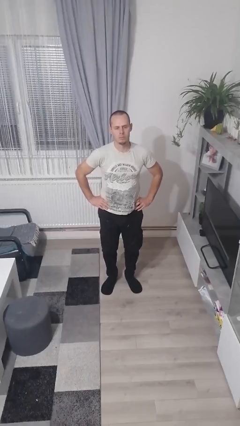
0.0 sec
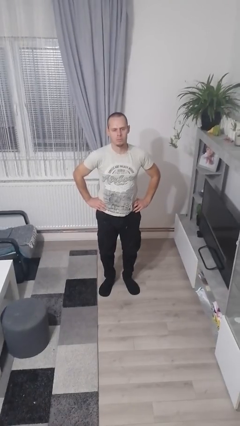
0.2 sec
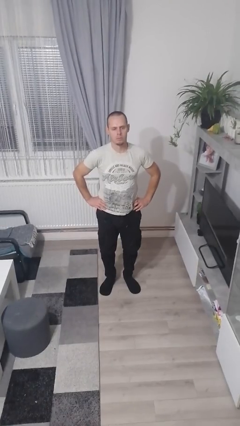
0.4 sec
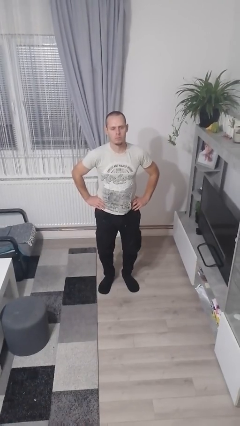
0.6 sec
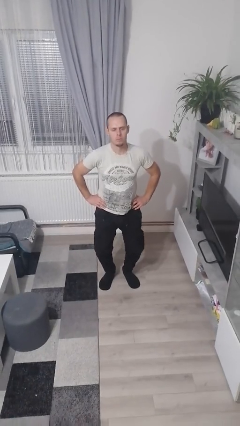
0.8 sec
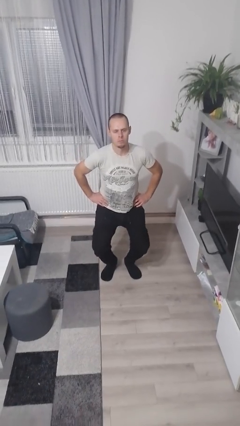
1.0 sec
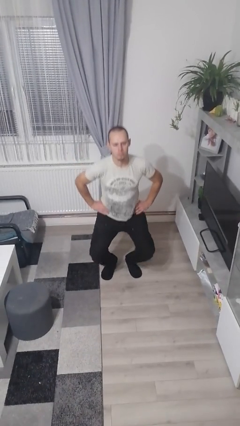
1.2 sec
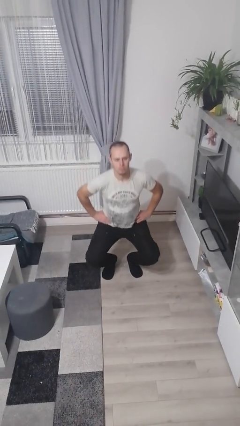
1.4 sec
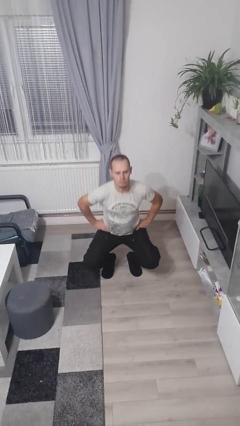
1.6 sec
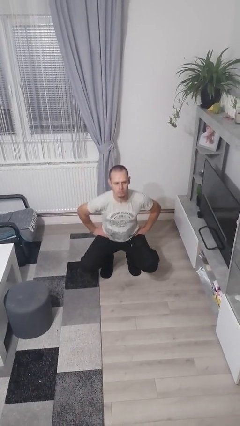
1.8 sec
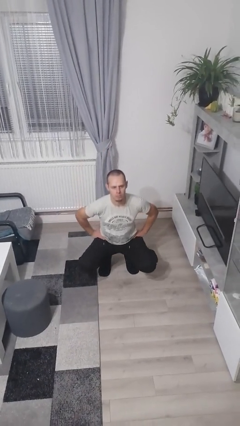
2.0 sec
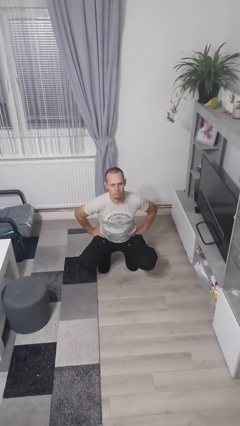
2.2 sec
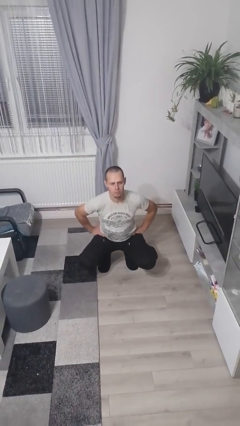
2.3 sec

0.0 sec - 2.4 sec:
person squats

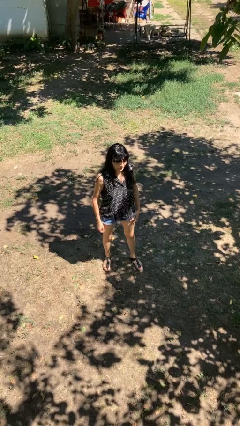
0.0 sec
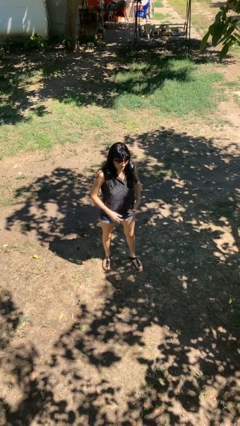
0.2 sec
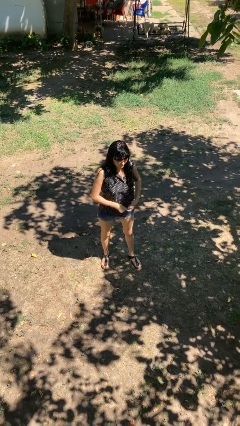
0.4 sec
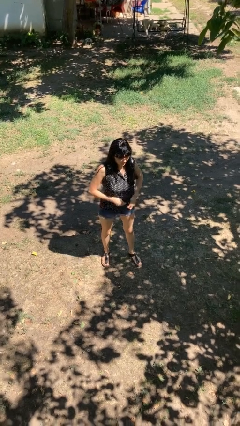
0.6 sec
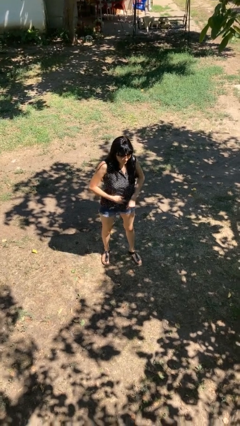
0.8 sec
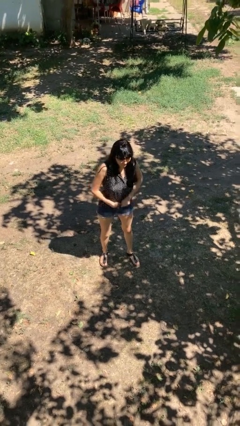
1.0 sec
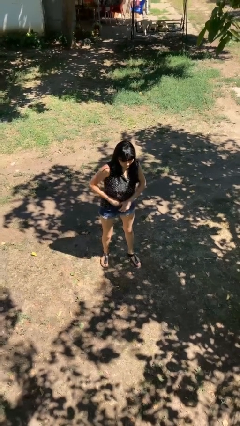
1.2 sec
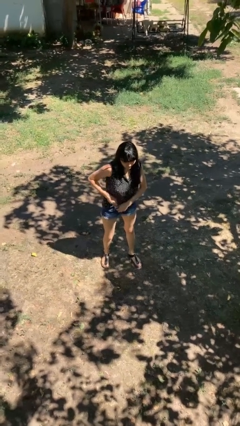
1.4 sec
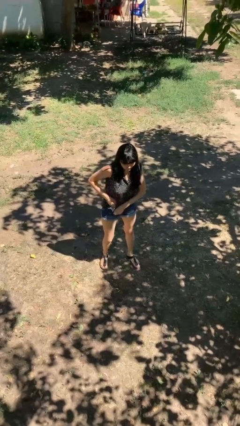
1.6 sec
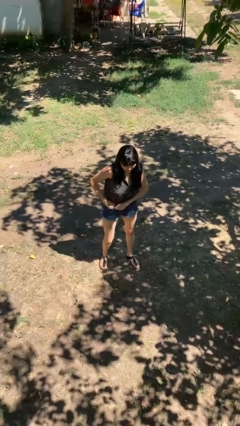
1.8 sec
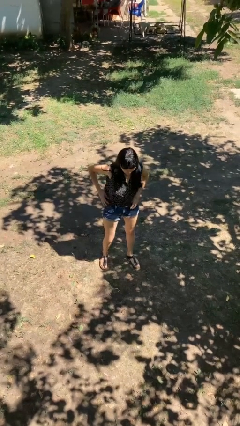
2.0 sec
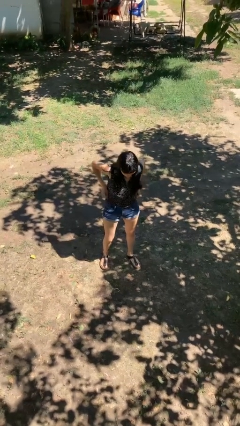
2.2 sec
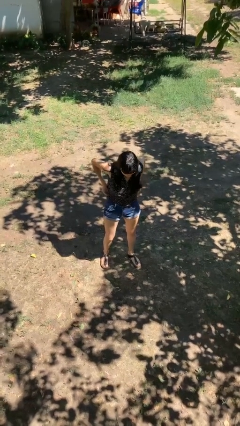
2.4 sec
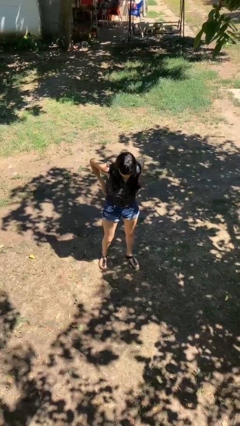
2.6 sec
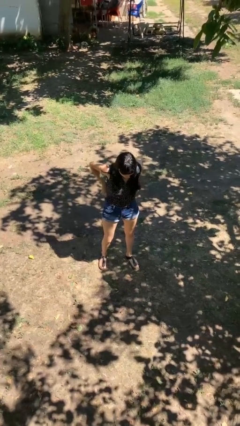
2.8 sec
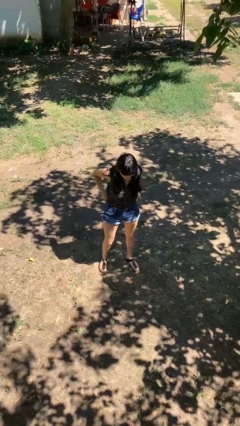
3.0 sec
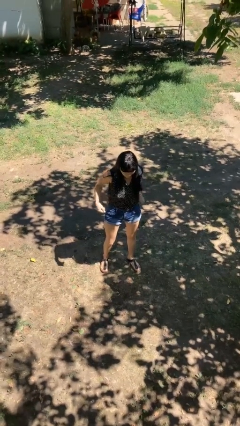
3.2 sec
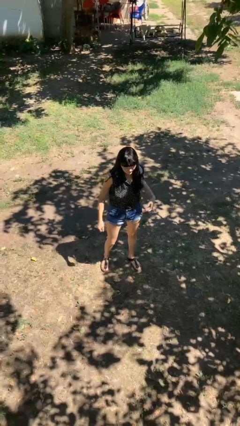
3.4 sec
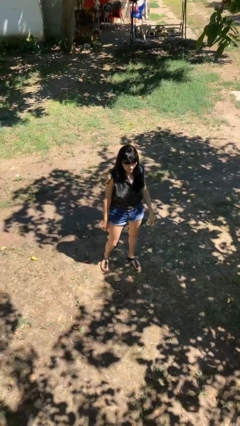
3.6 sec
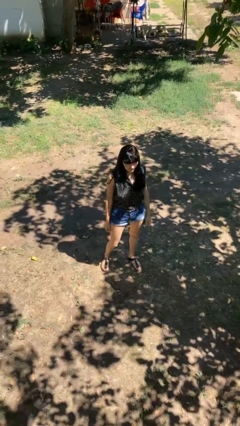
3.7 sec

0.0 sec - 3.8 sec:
person tucks in shirt

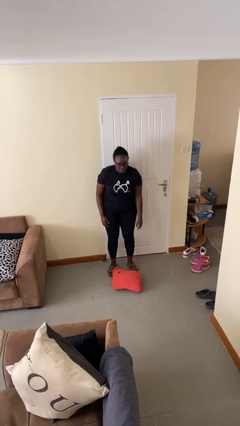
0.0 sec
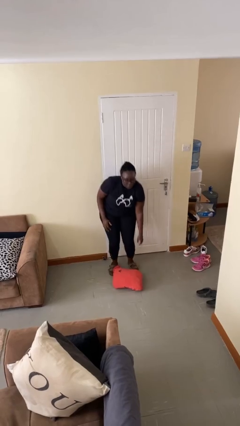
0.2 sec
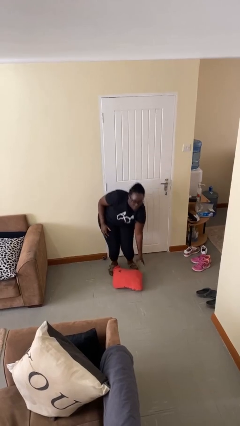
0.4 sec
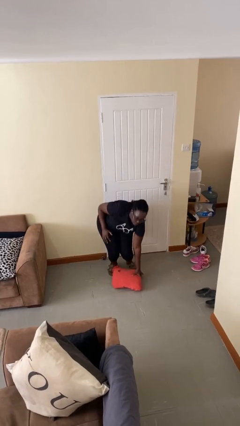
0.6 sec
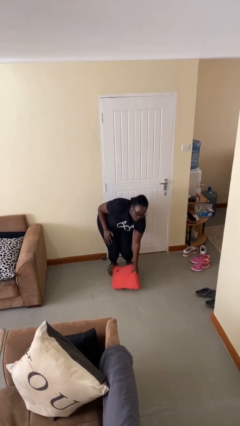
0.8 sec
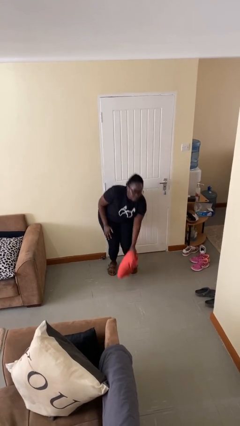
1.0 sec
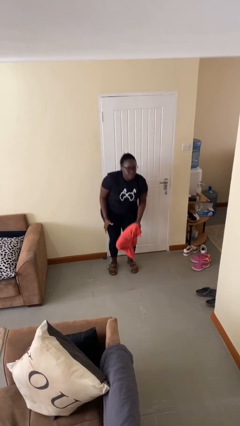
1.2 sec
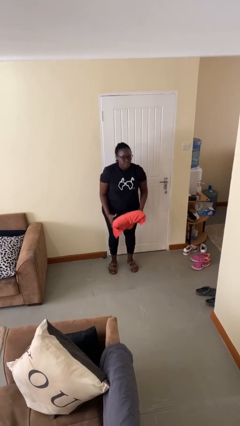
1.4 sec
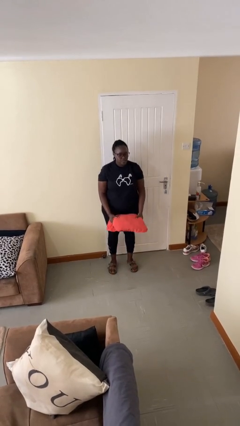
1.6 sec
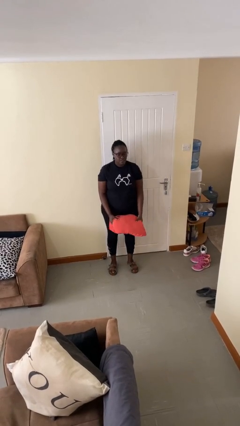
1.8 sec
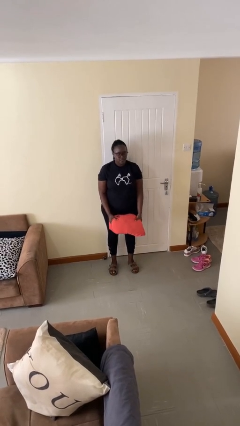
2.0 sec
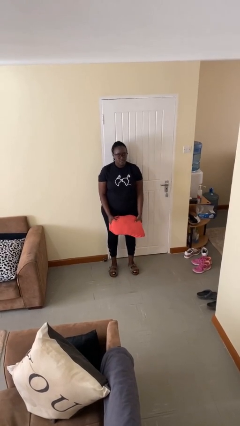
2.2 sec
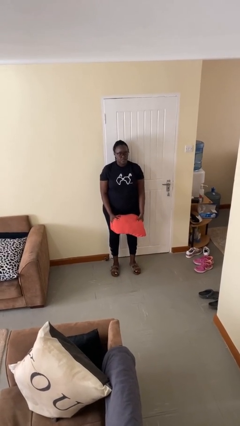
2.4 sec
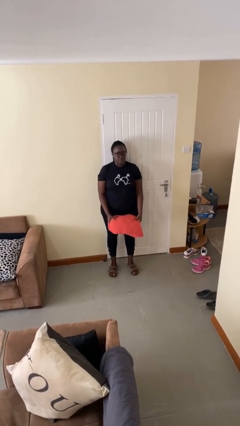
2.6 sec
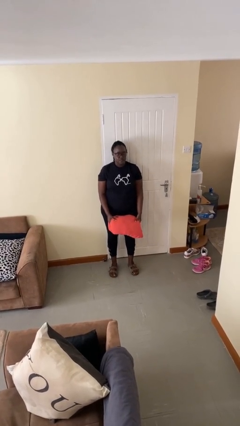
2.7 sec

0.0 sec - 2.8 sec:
person picks up object from floor

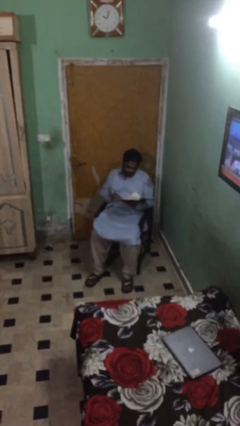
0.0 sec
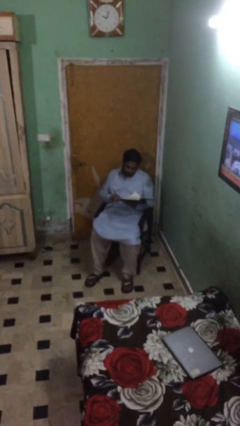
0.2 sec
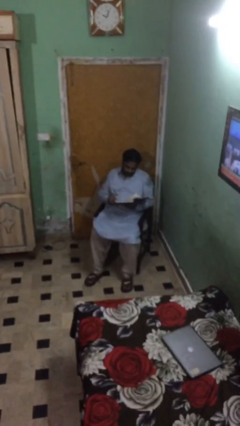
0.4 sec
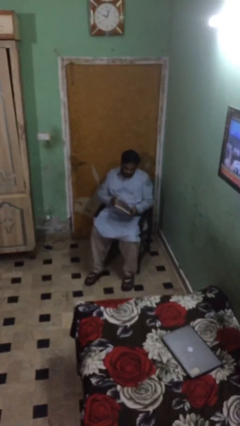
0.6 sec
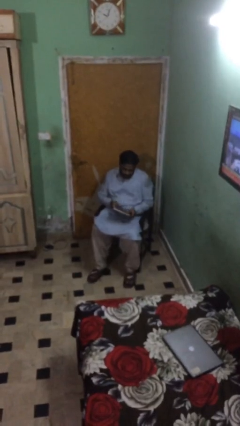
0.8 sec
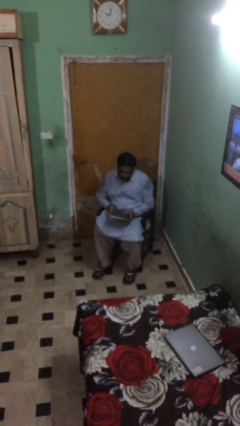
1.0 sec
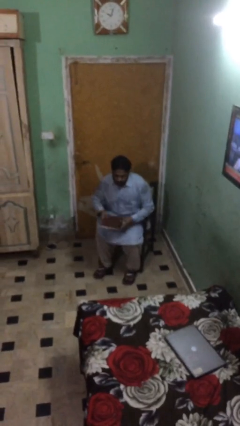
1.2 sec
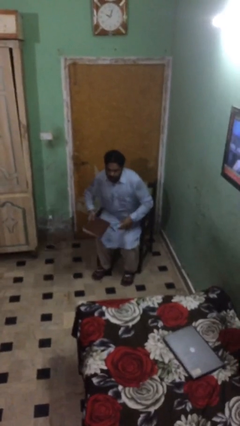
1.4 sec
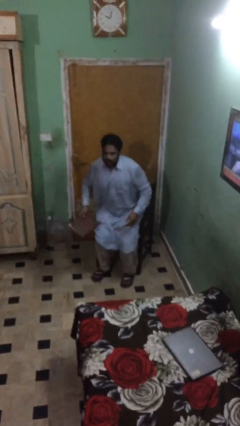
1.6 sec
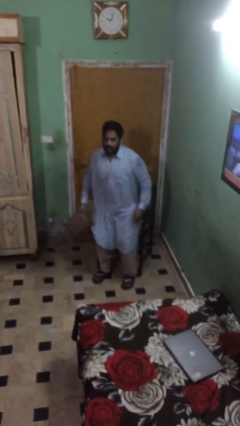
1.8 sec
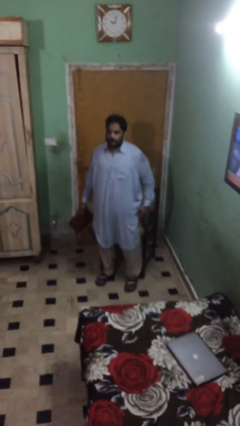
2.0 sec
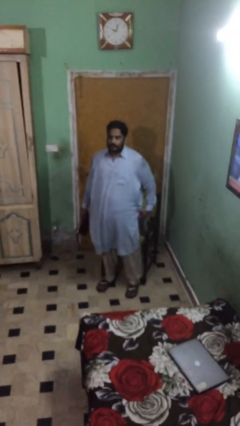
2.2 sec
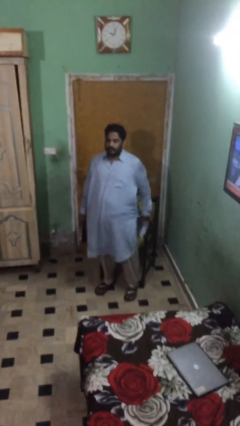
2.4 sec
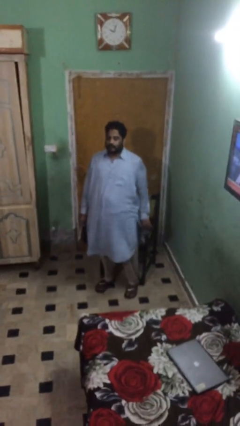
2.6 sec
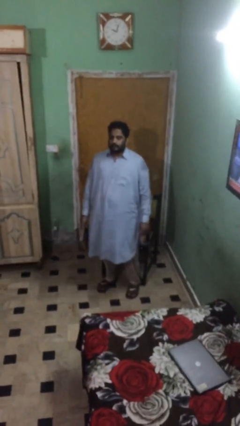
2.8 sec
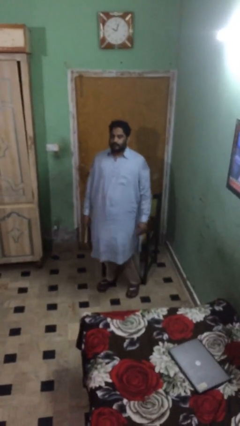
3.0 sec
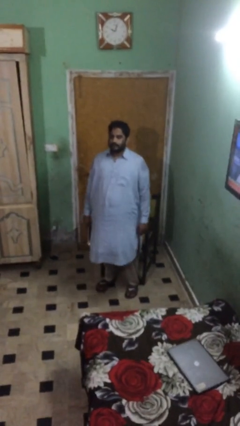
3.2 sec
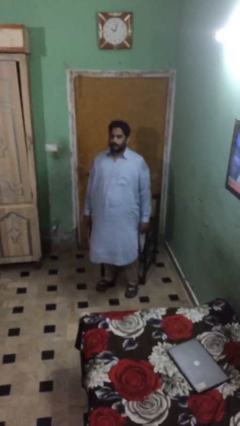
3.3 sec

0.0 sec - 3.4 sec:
person stands up

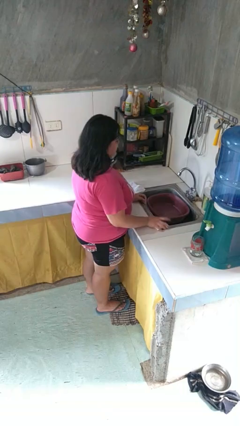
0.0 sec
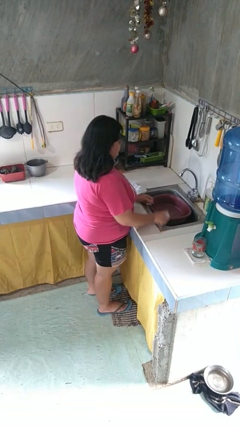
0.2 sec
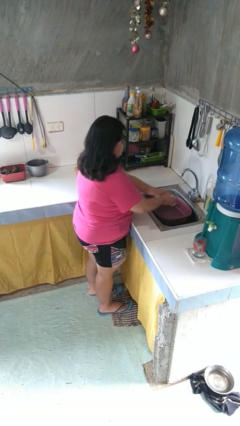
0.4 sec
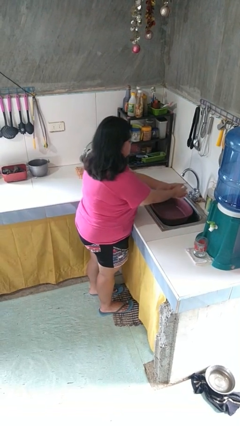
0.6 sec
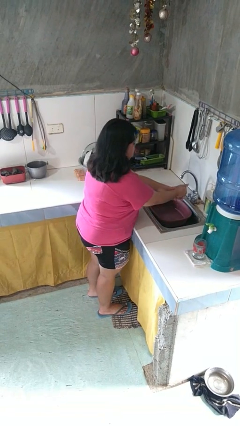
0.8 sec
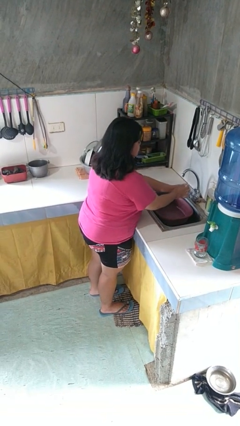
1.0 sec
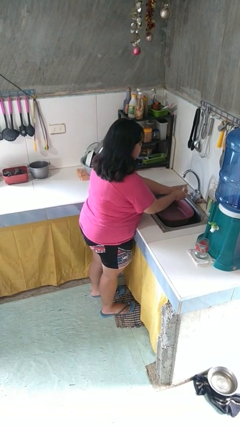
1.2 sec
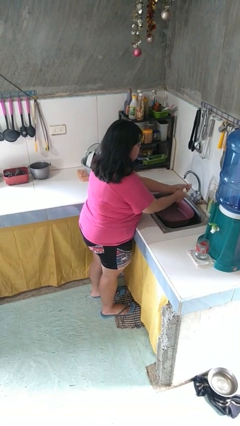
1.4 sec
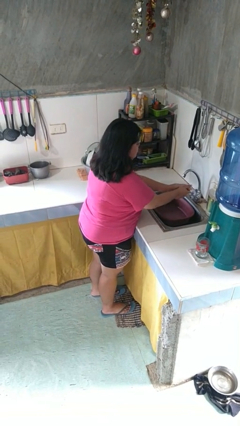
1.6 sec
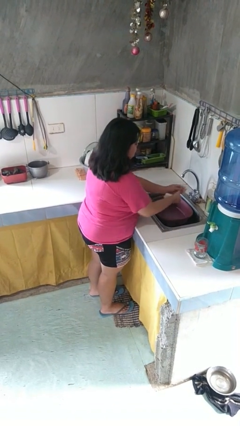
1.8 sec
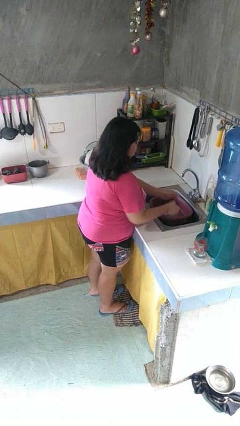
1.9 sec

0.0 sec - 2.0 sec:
person washes hands

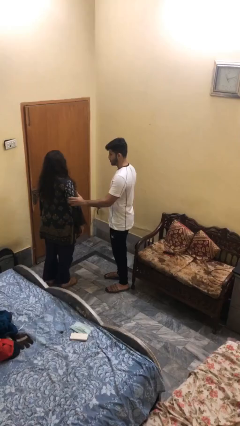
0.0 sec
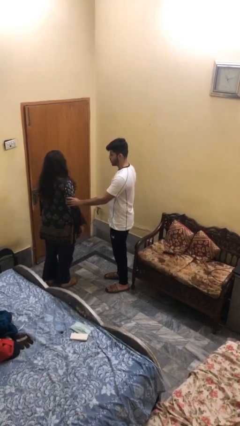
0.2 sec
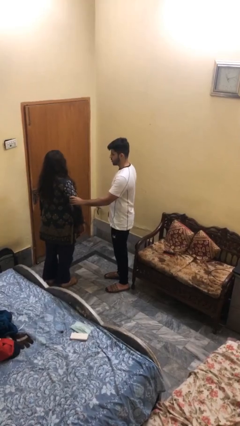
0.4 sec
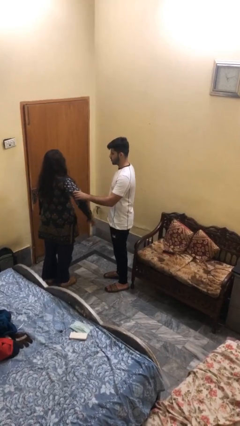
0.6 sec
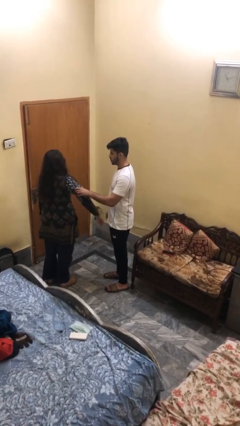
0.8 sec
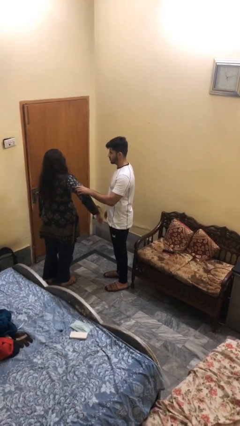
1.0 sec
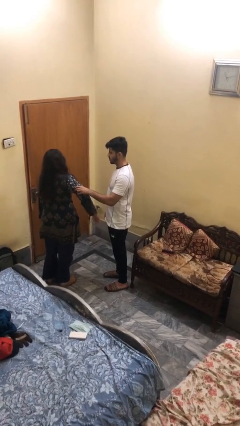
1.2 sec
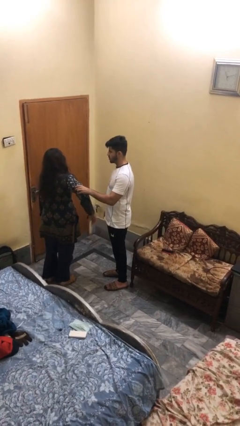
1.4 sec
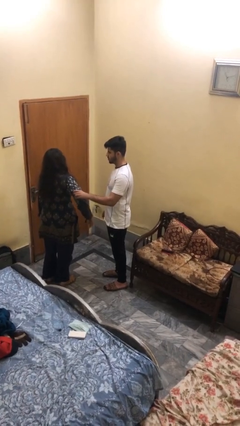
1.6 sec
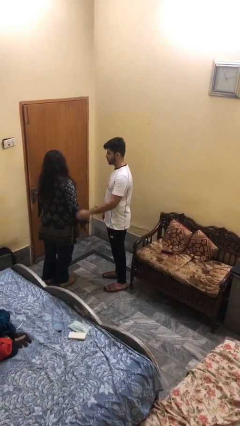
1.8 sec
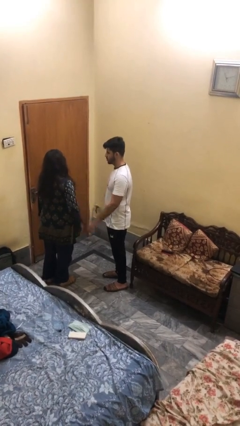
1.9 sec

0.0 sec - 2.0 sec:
person grabs person by bicep

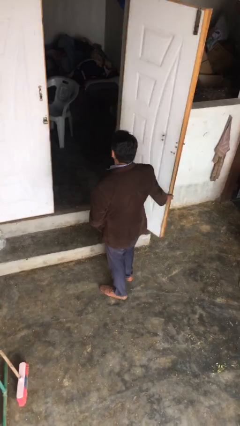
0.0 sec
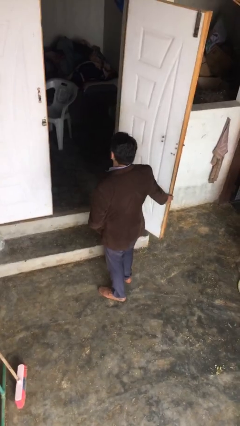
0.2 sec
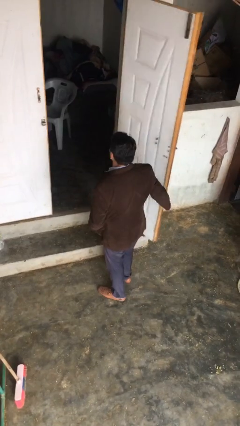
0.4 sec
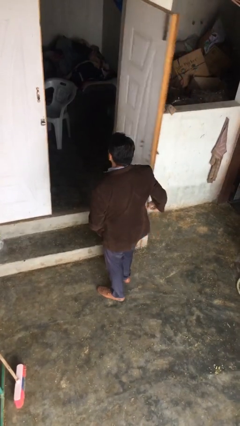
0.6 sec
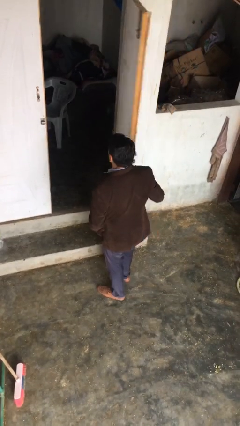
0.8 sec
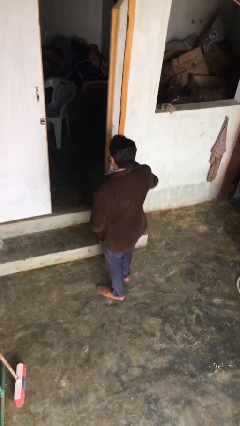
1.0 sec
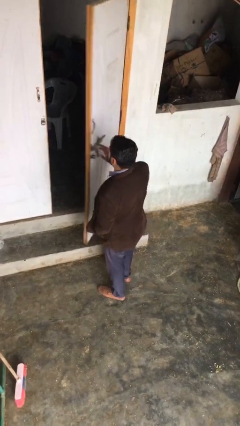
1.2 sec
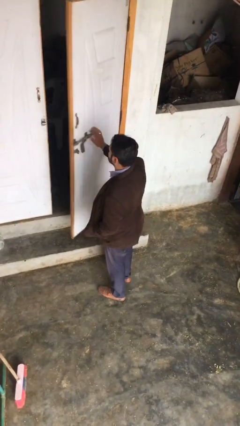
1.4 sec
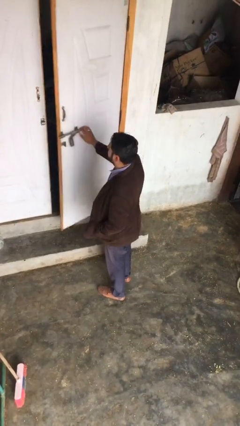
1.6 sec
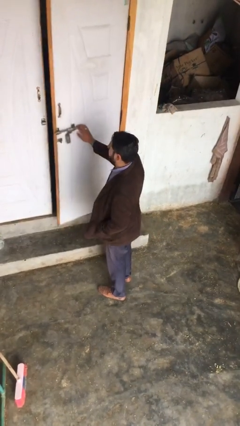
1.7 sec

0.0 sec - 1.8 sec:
person closes facility door
